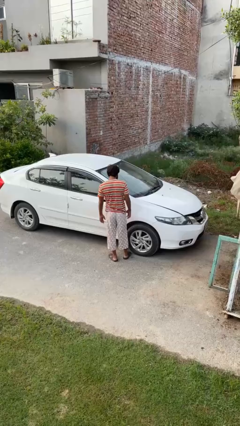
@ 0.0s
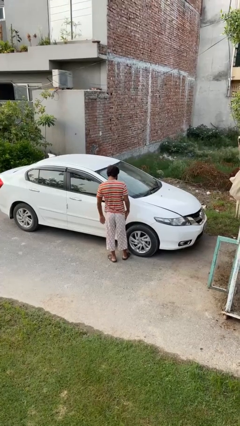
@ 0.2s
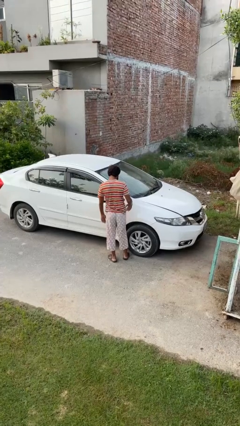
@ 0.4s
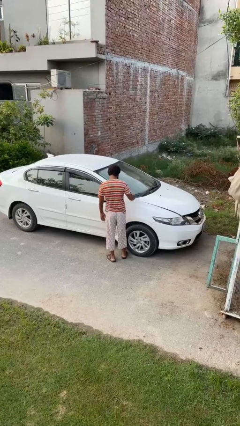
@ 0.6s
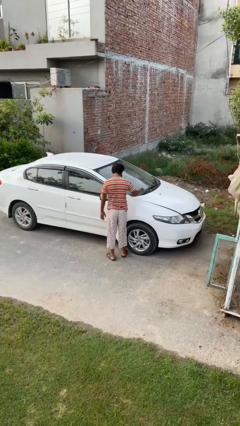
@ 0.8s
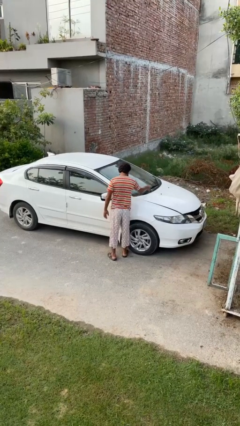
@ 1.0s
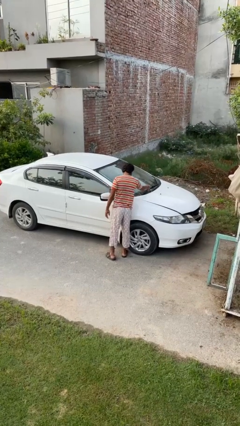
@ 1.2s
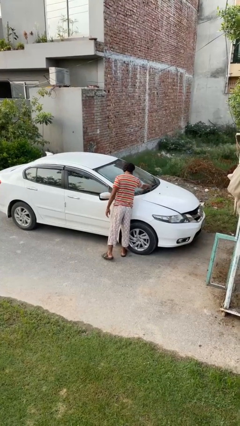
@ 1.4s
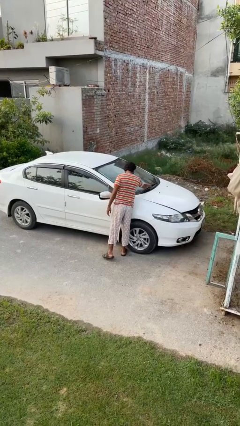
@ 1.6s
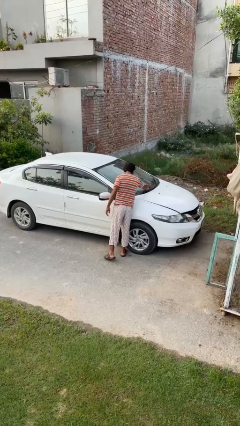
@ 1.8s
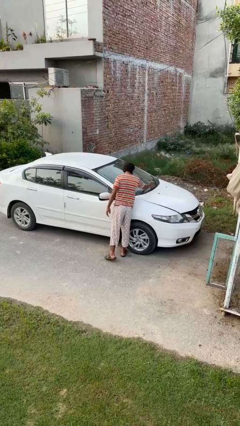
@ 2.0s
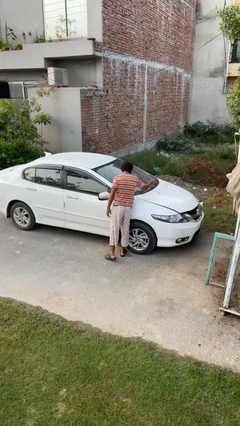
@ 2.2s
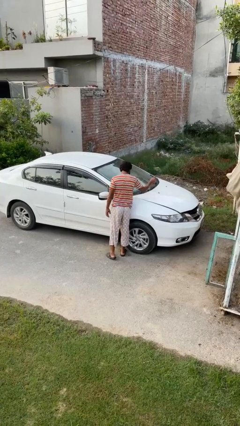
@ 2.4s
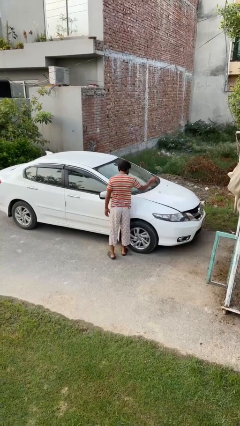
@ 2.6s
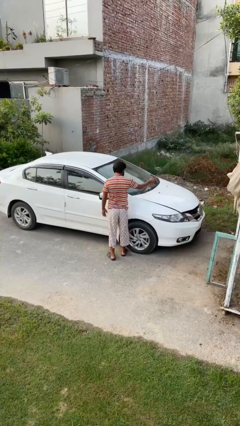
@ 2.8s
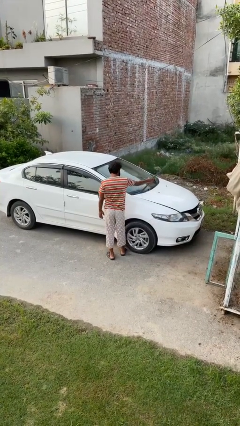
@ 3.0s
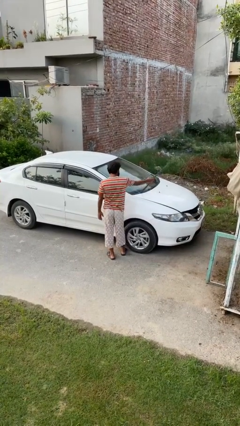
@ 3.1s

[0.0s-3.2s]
person flips up car wipers

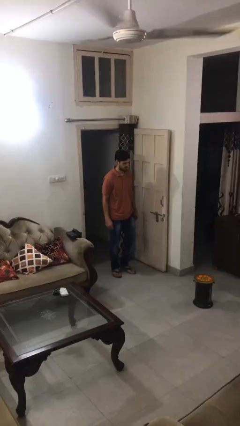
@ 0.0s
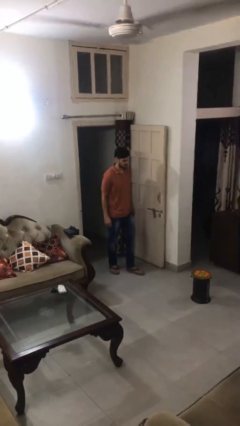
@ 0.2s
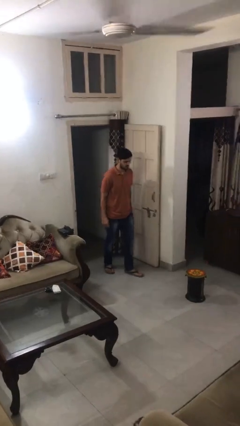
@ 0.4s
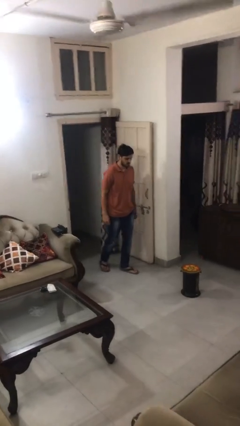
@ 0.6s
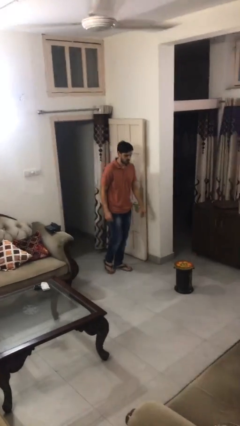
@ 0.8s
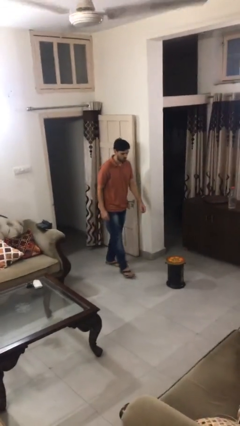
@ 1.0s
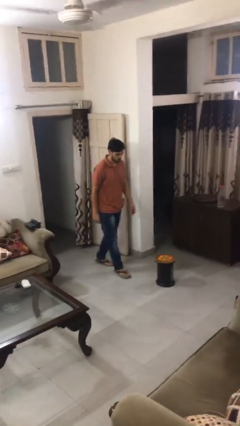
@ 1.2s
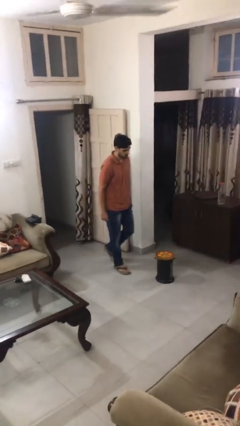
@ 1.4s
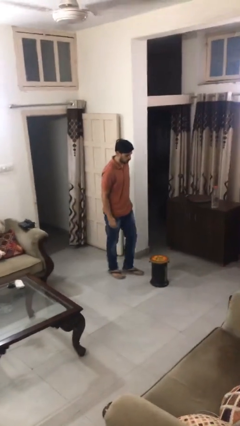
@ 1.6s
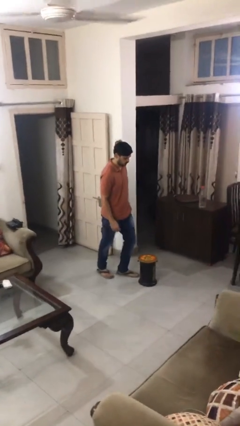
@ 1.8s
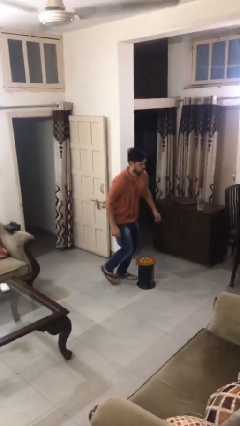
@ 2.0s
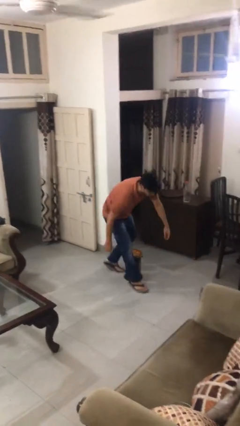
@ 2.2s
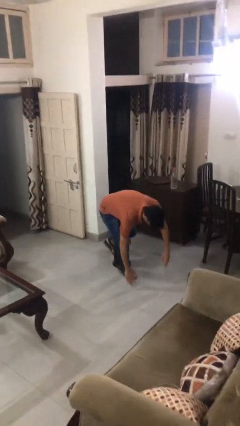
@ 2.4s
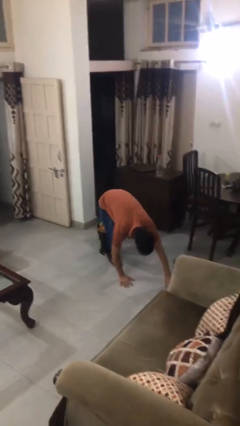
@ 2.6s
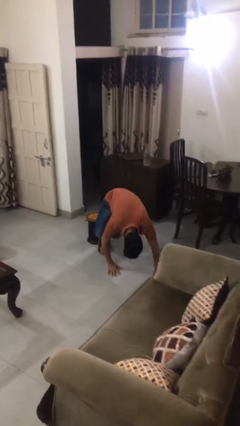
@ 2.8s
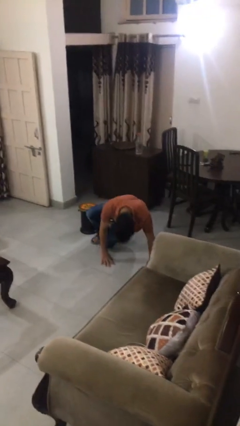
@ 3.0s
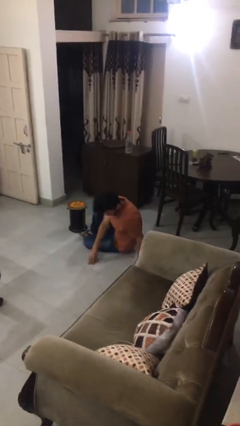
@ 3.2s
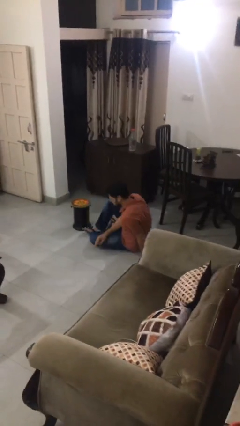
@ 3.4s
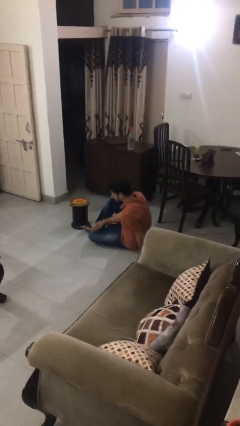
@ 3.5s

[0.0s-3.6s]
person trips on object on floor

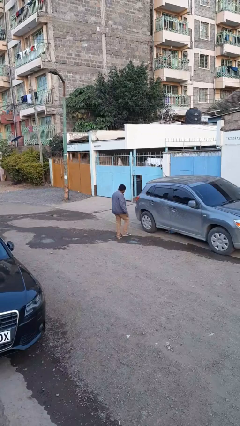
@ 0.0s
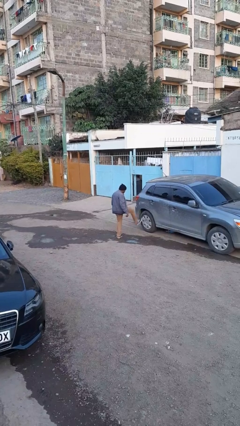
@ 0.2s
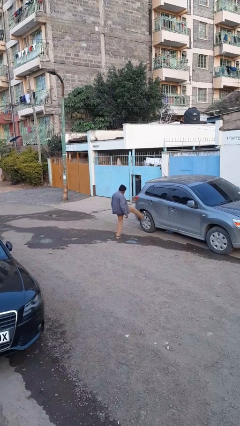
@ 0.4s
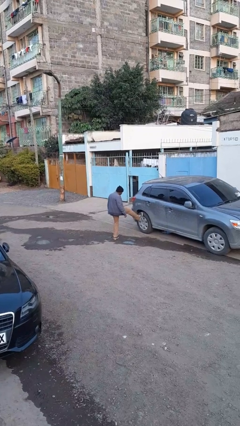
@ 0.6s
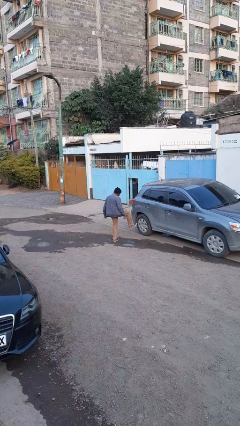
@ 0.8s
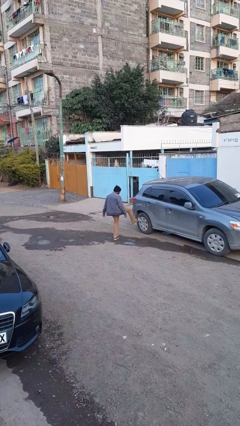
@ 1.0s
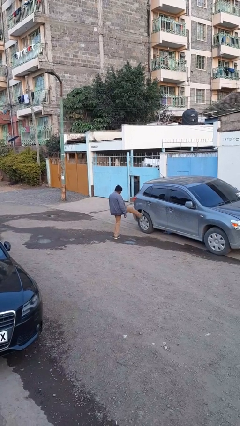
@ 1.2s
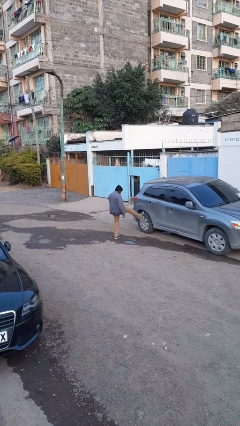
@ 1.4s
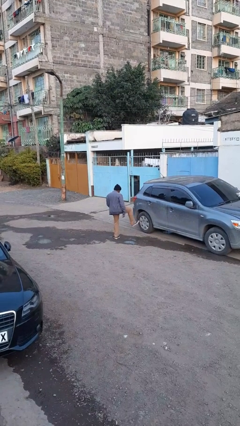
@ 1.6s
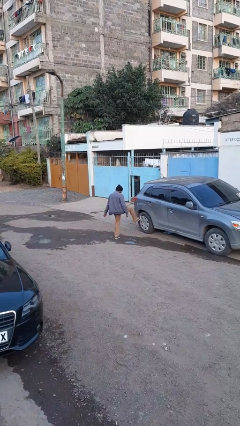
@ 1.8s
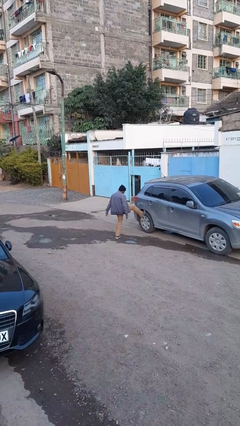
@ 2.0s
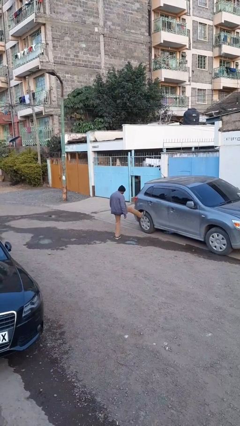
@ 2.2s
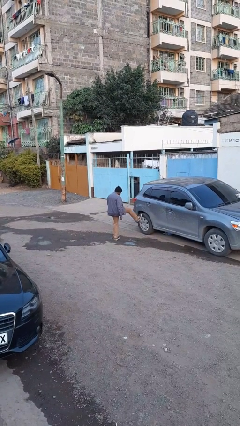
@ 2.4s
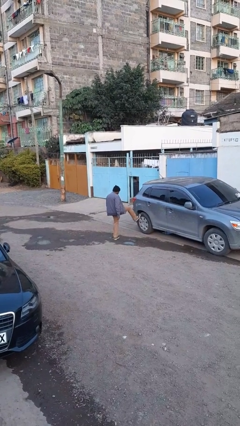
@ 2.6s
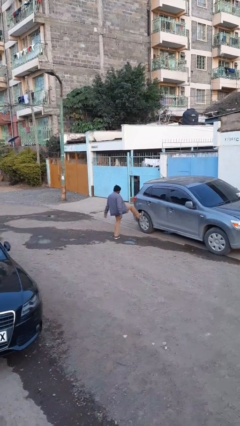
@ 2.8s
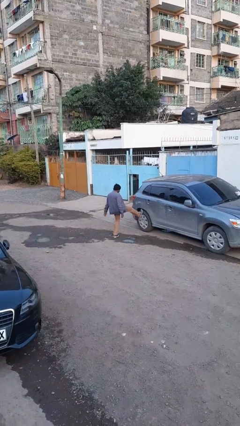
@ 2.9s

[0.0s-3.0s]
person kicks car tires

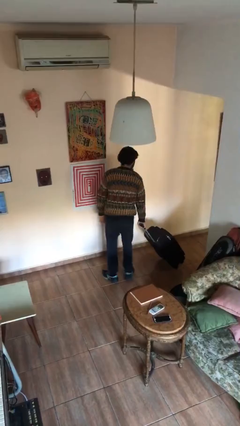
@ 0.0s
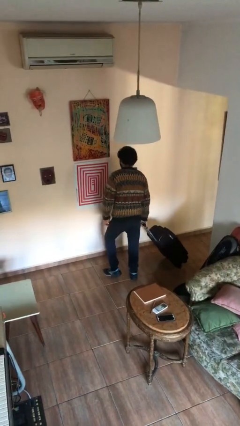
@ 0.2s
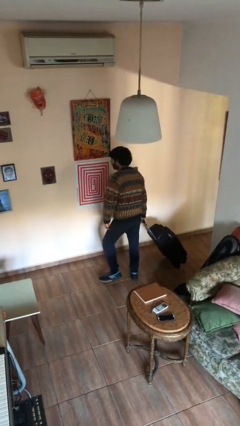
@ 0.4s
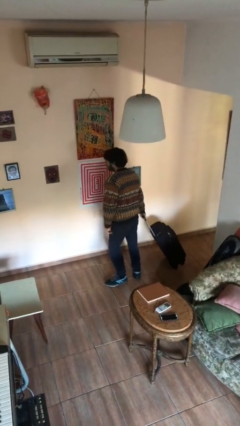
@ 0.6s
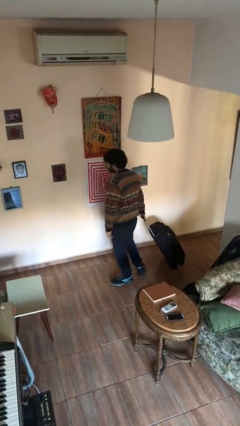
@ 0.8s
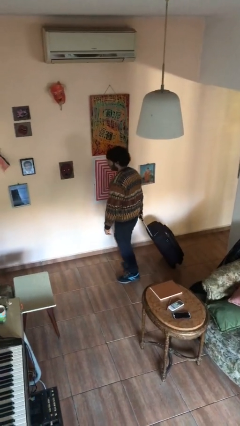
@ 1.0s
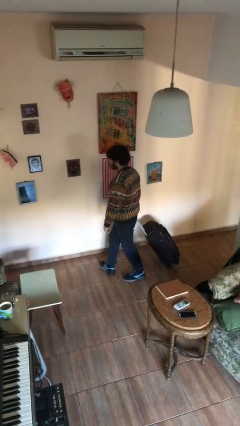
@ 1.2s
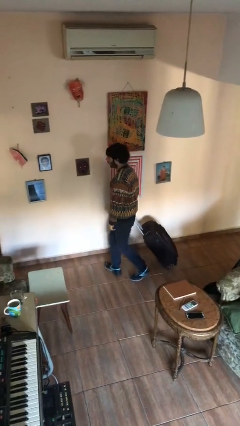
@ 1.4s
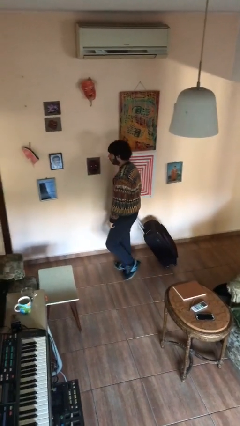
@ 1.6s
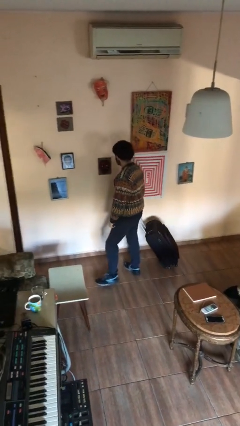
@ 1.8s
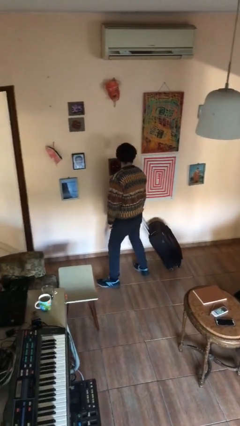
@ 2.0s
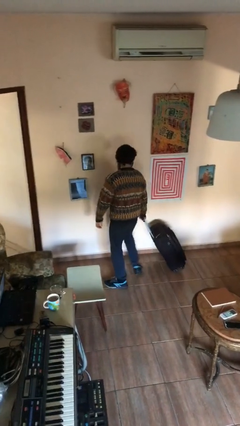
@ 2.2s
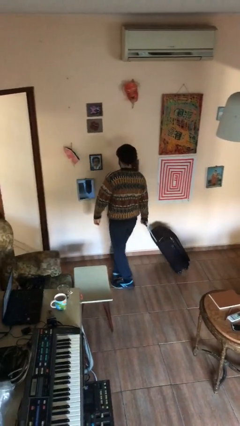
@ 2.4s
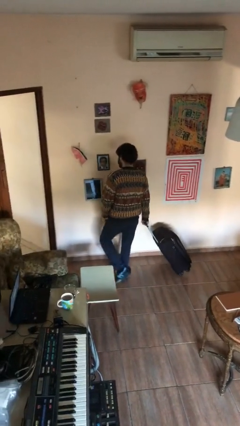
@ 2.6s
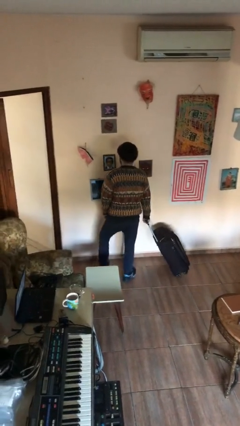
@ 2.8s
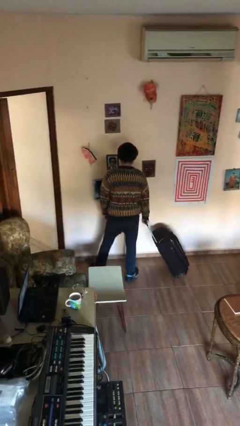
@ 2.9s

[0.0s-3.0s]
person pulls wheeled cart

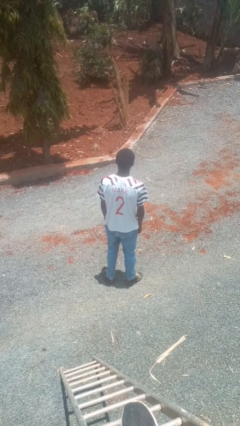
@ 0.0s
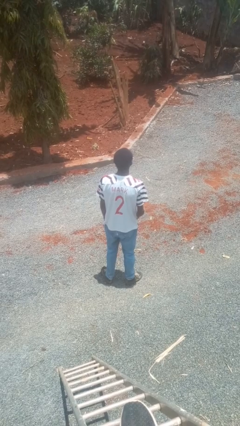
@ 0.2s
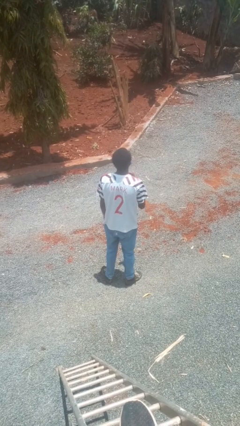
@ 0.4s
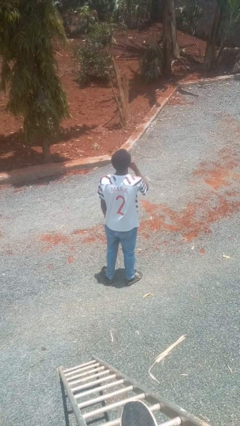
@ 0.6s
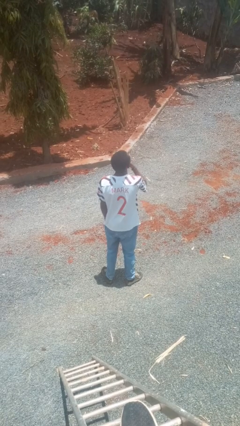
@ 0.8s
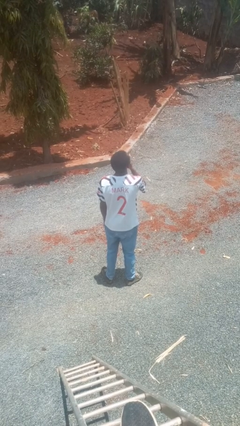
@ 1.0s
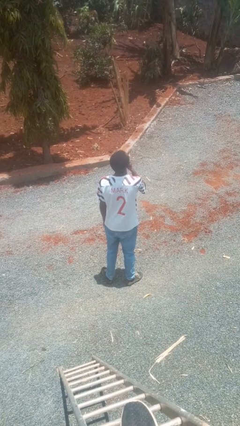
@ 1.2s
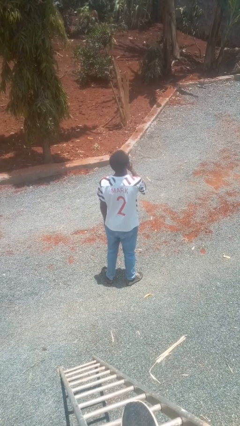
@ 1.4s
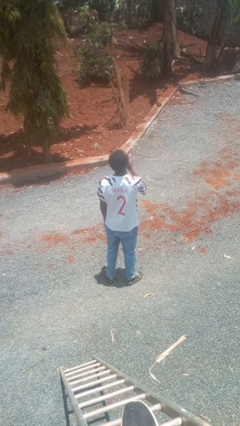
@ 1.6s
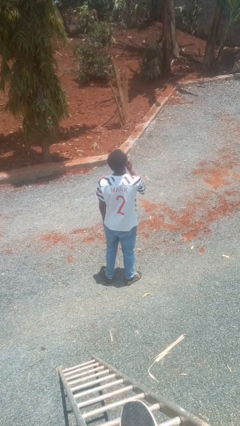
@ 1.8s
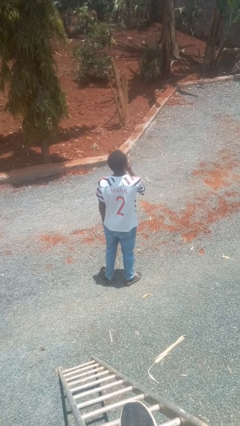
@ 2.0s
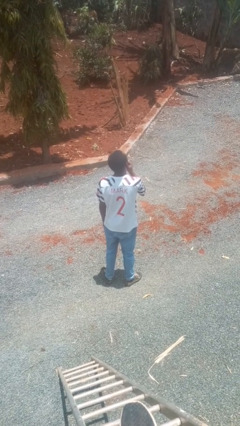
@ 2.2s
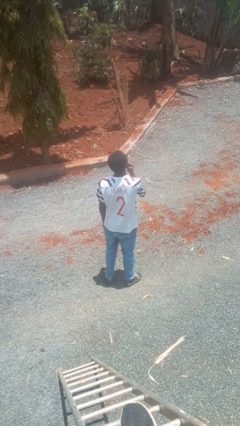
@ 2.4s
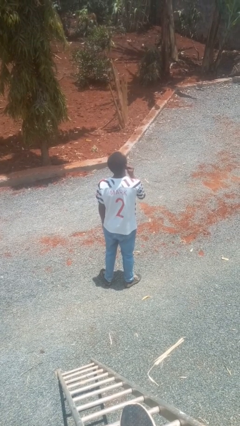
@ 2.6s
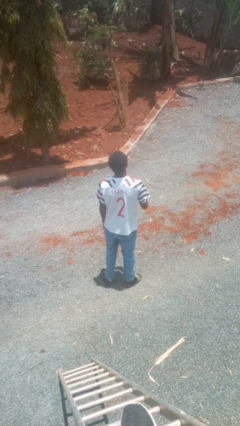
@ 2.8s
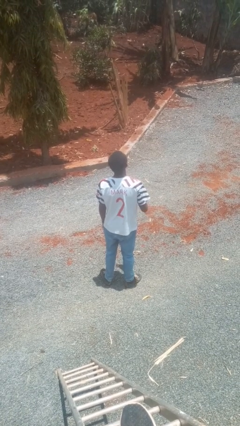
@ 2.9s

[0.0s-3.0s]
person strokes chin

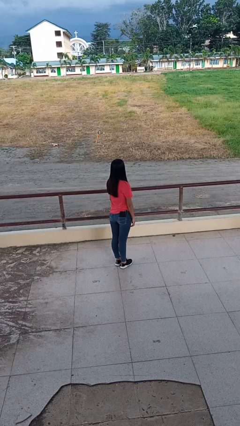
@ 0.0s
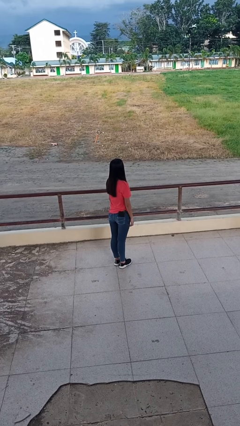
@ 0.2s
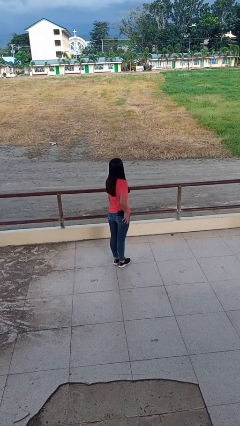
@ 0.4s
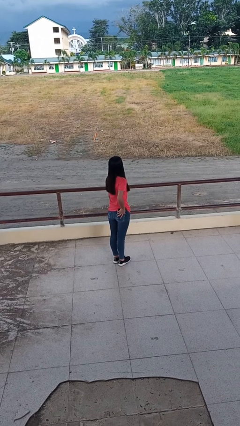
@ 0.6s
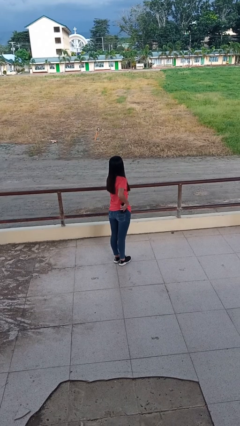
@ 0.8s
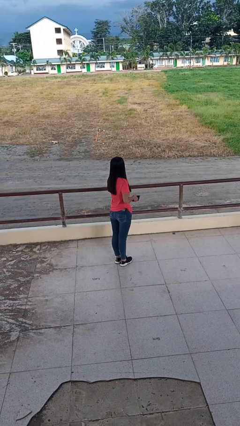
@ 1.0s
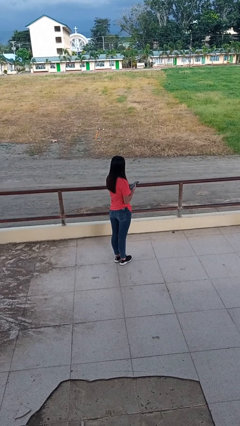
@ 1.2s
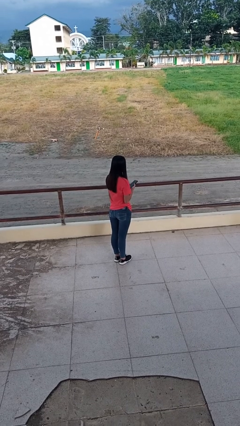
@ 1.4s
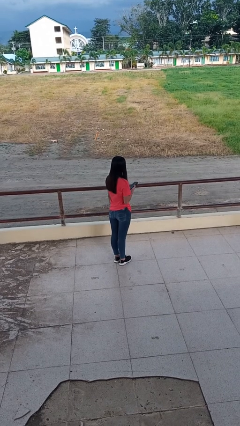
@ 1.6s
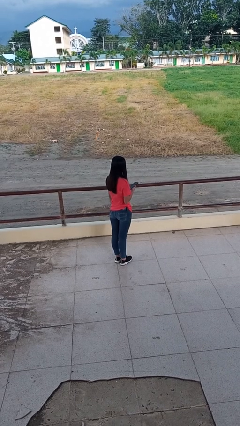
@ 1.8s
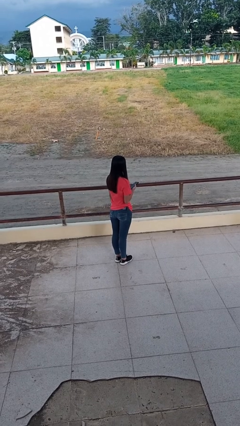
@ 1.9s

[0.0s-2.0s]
person takes phone from pocket
